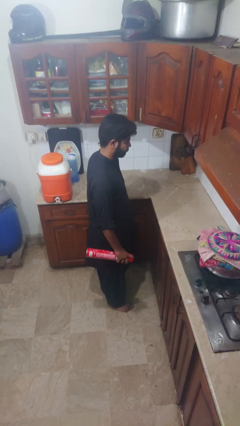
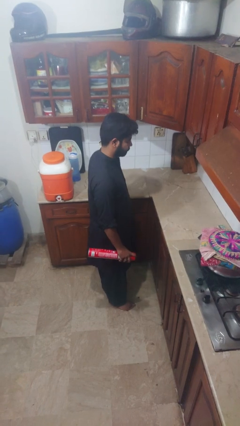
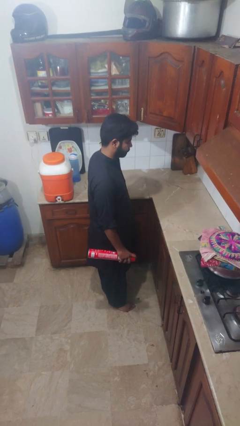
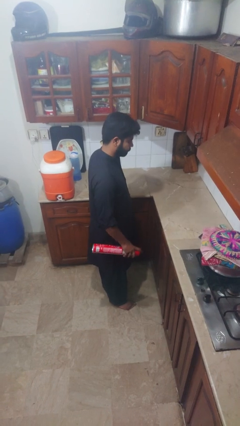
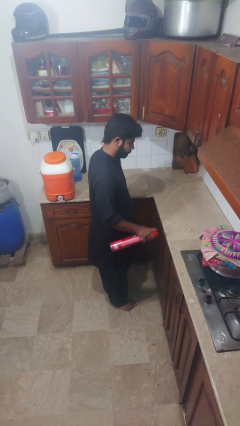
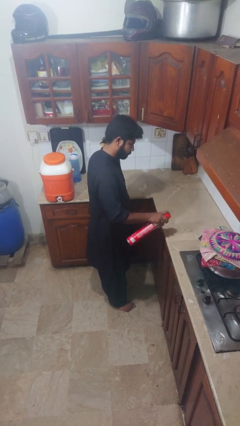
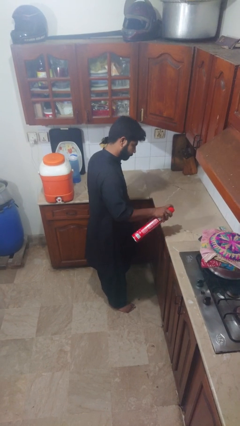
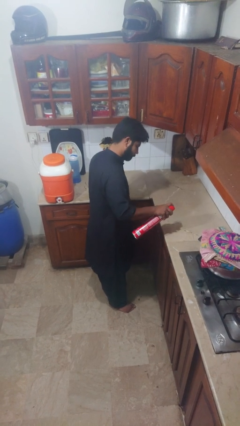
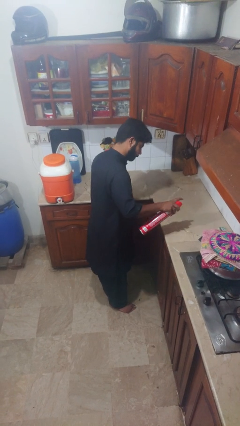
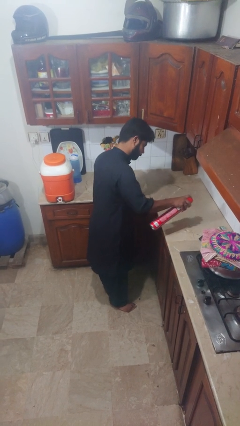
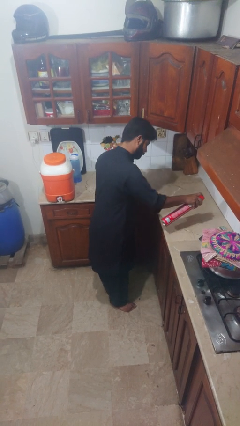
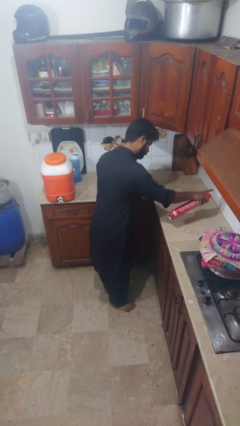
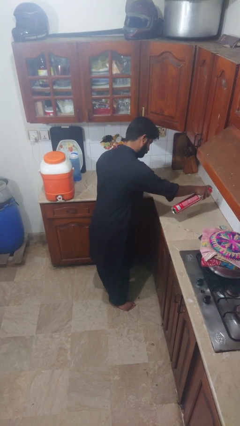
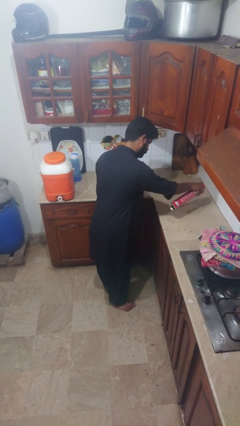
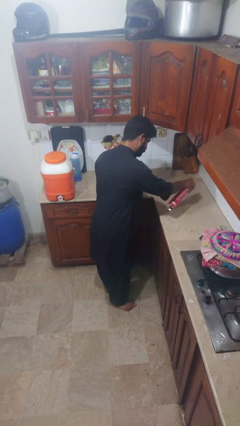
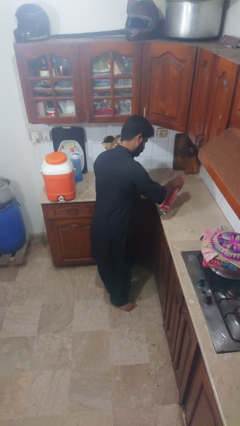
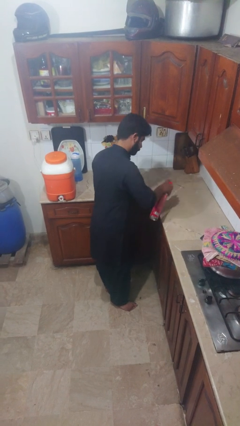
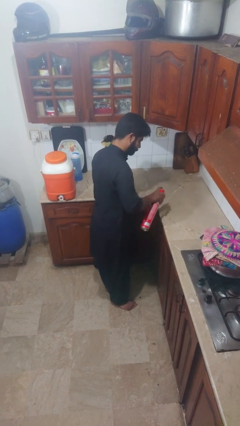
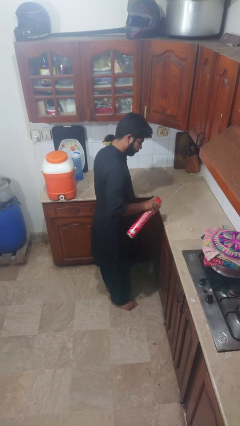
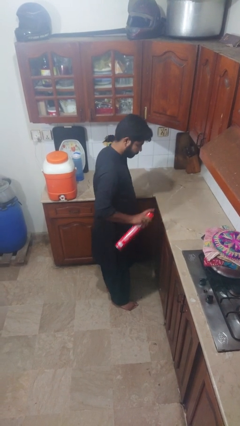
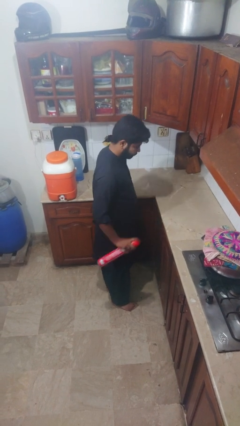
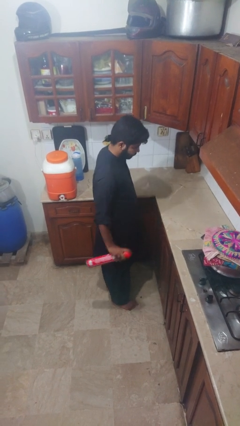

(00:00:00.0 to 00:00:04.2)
person sprays from bottle

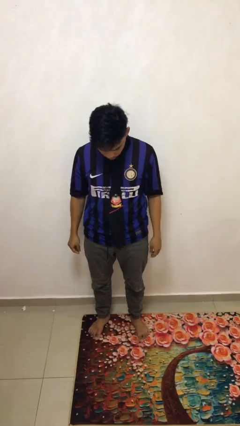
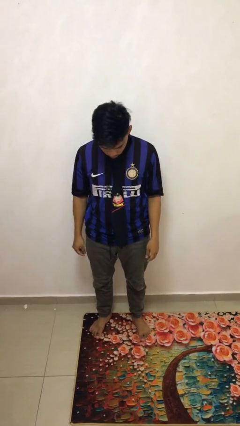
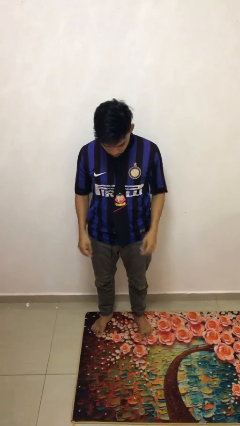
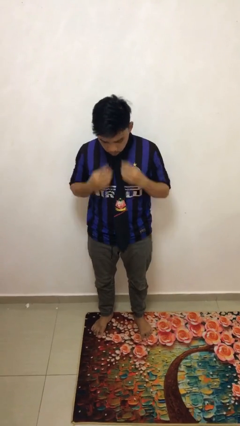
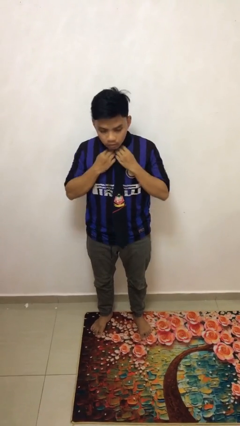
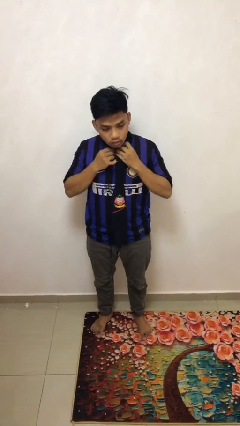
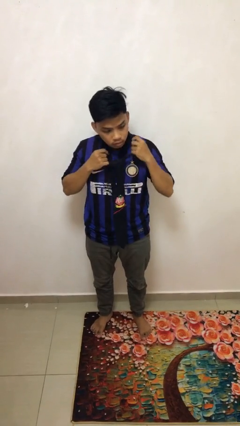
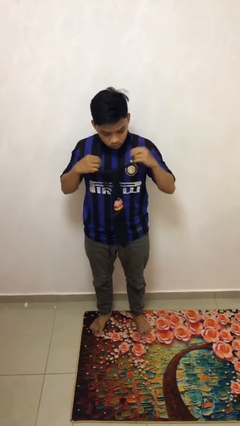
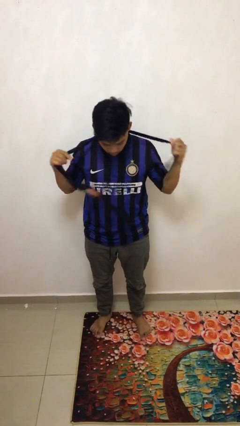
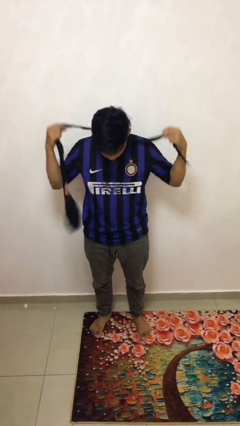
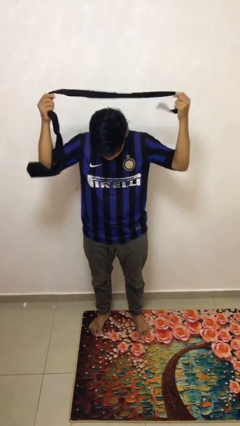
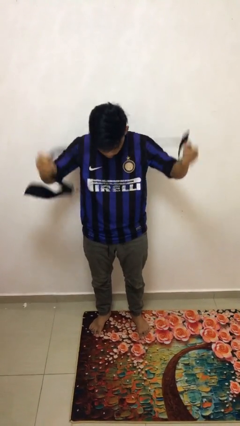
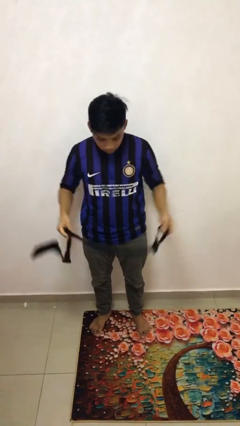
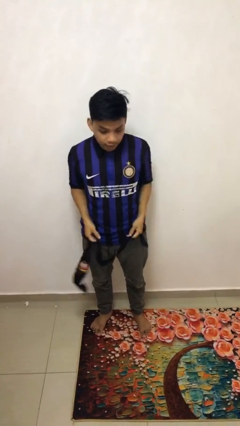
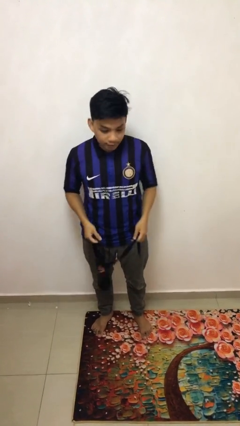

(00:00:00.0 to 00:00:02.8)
person takes off necktie

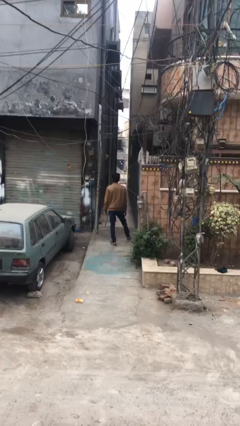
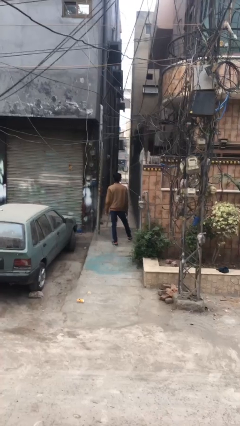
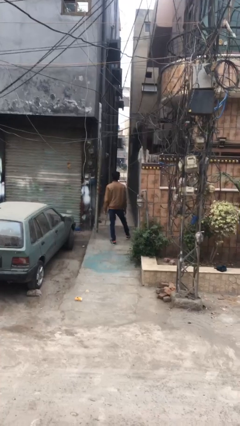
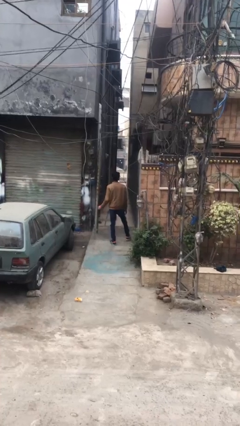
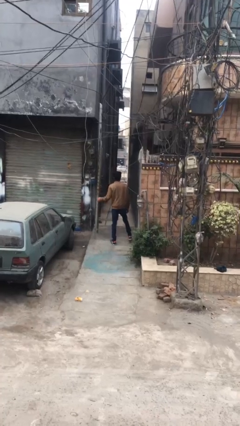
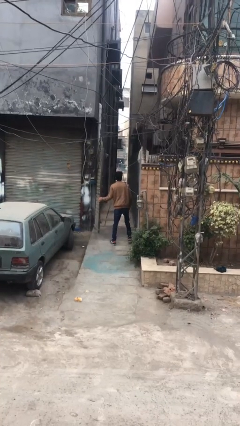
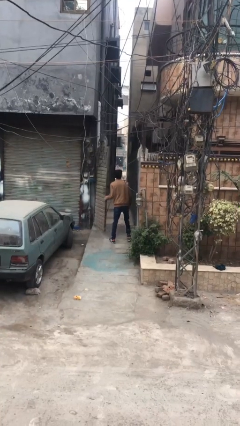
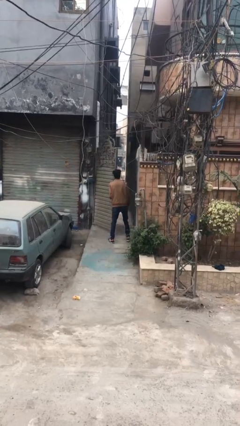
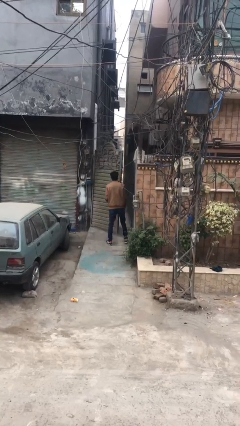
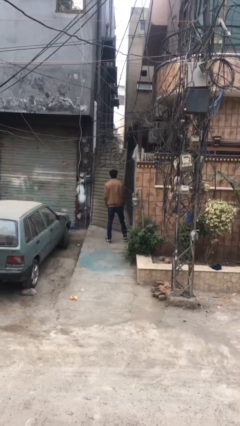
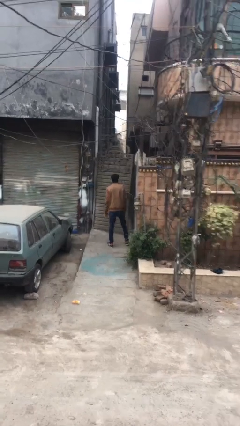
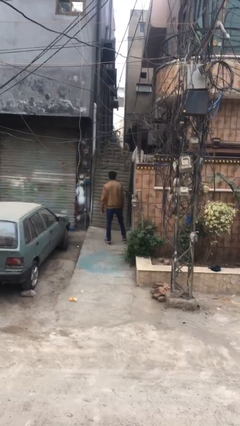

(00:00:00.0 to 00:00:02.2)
person closes facility door

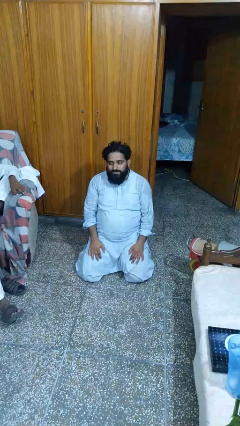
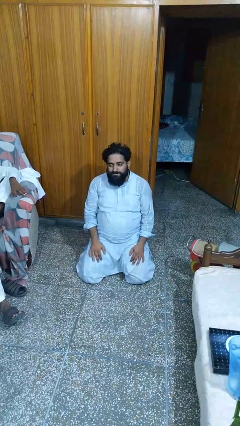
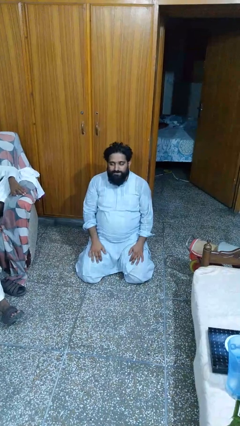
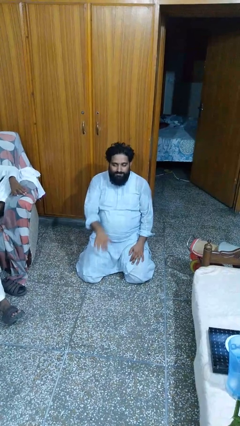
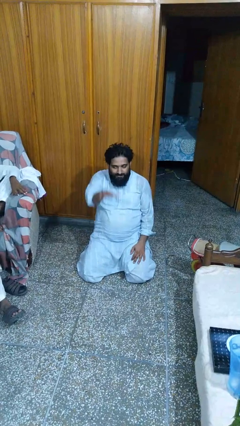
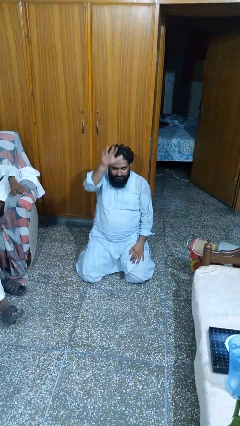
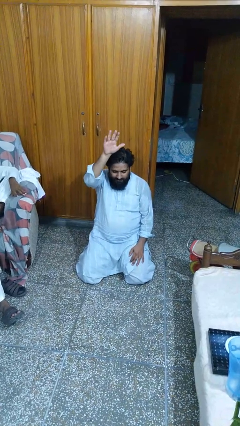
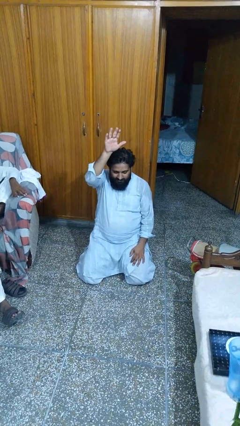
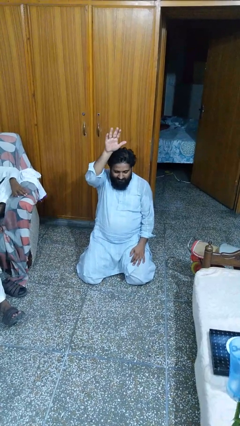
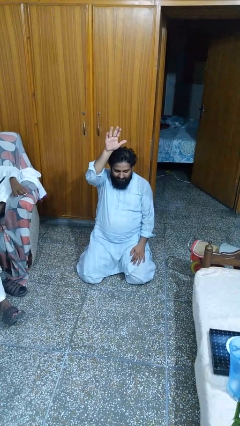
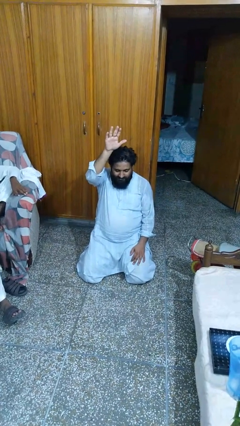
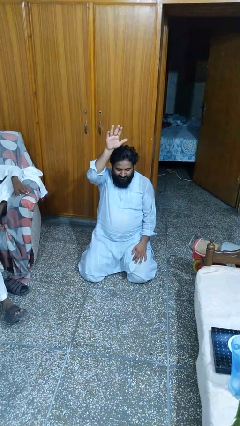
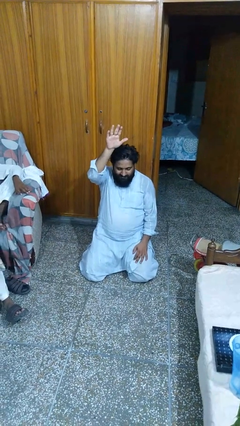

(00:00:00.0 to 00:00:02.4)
person gestures raise hand

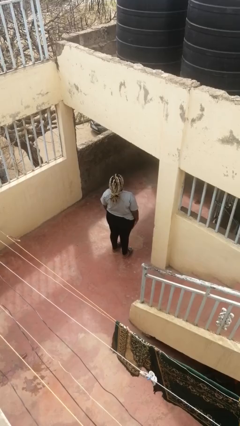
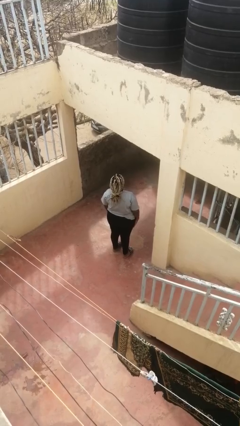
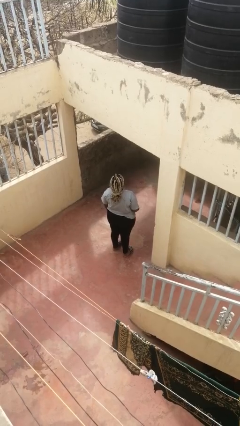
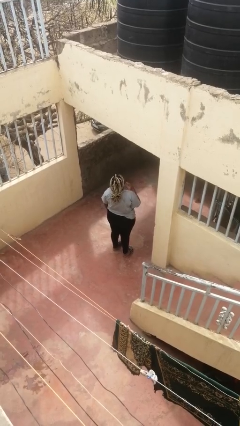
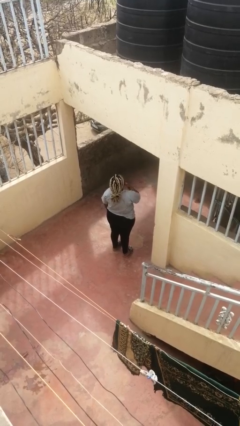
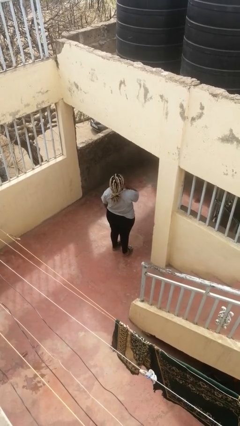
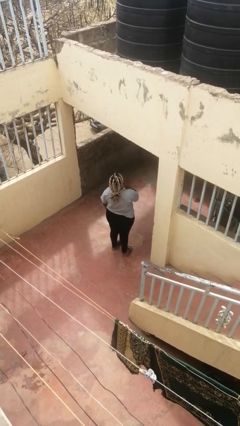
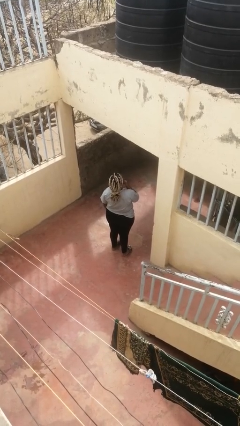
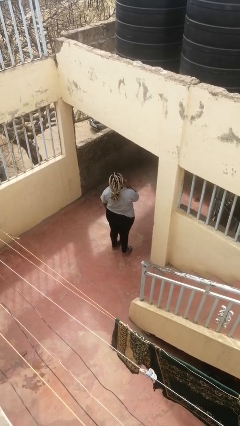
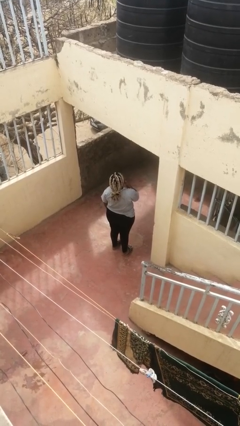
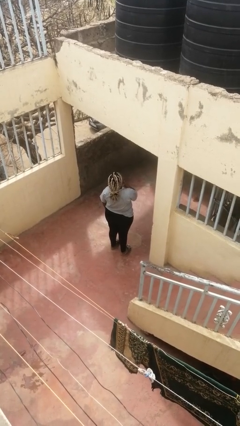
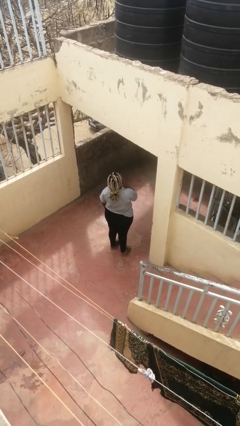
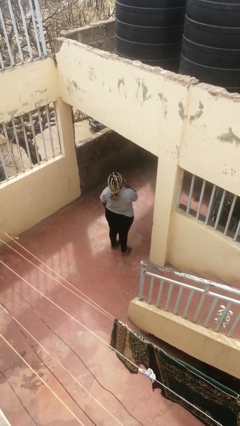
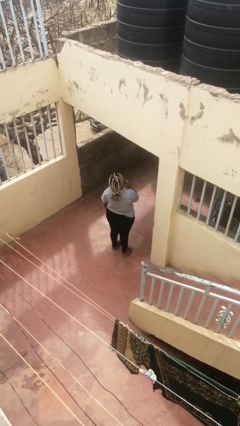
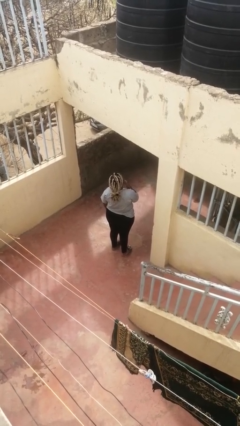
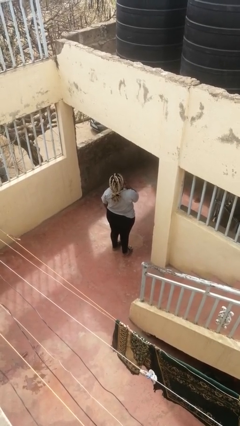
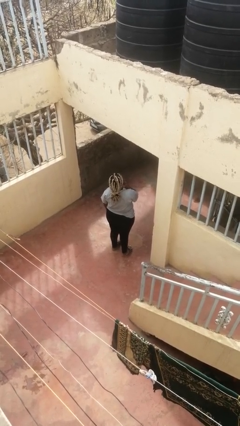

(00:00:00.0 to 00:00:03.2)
person strokes chin

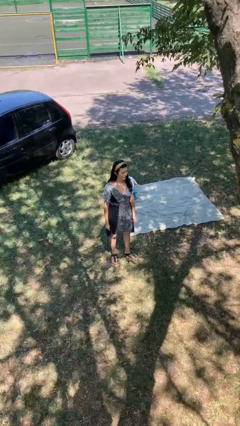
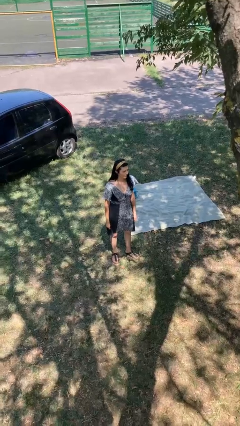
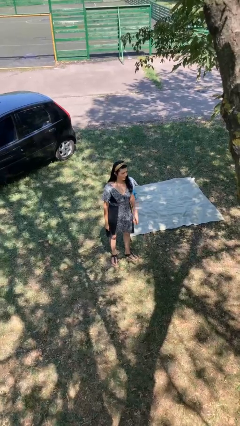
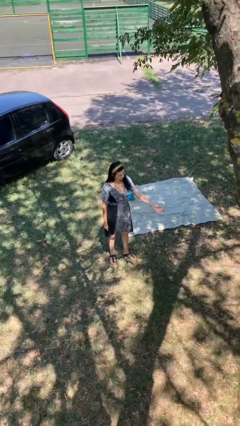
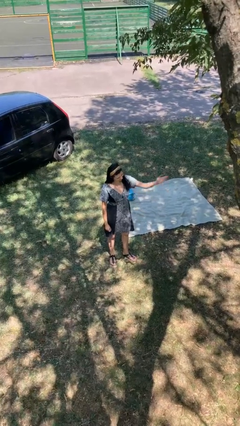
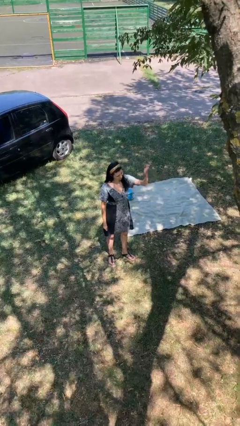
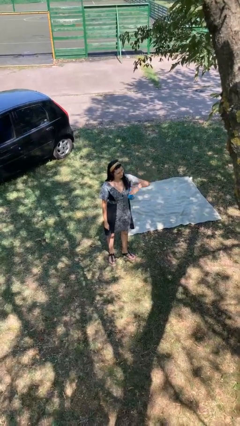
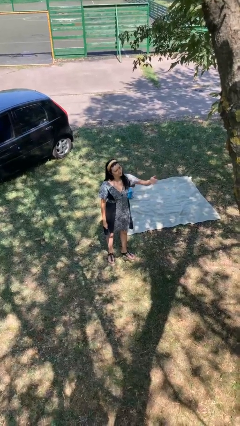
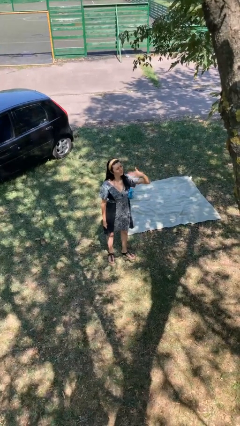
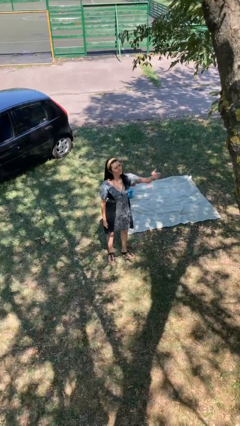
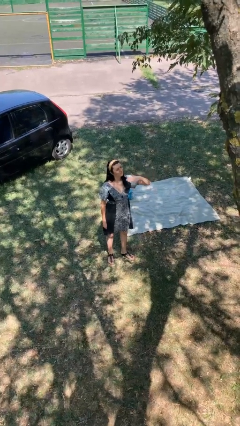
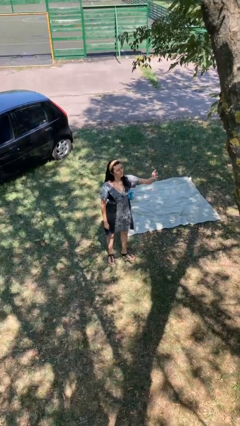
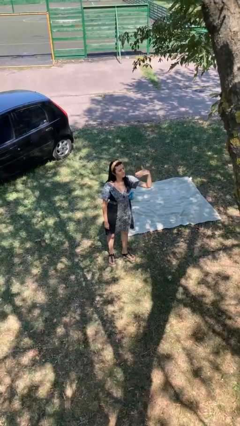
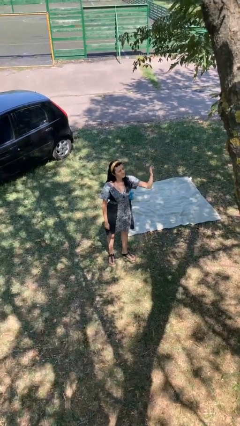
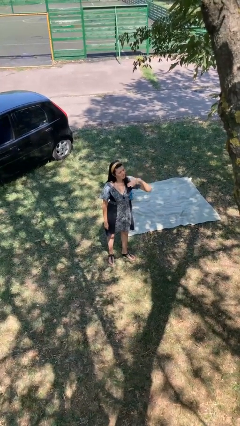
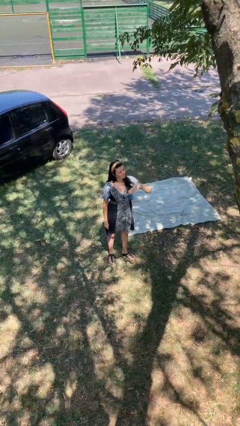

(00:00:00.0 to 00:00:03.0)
person gestures come here
